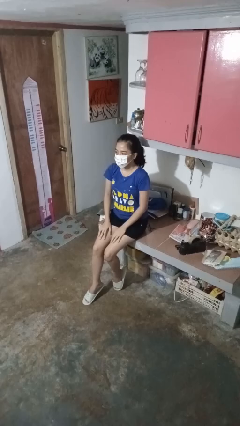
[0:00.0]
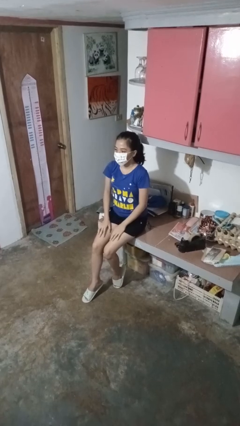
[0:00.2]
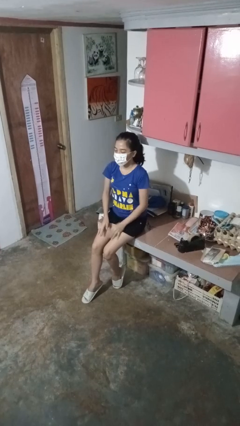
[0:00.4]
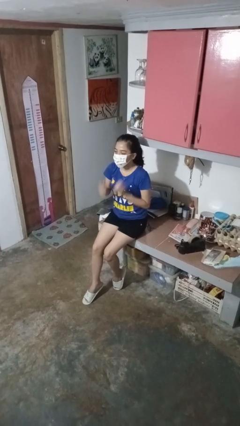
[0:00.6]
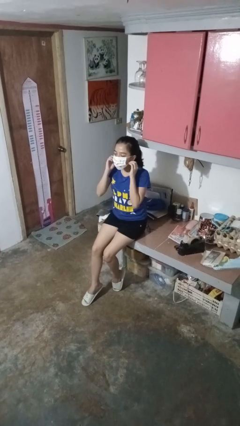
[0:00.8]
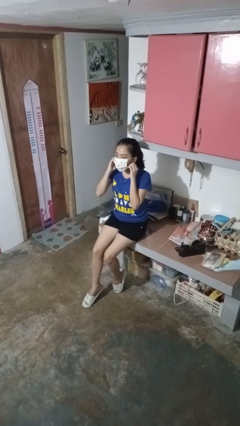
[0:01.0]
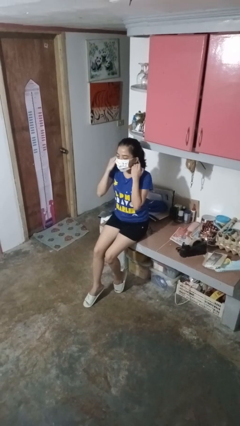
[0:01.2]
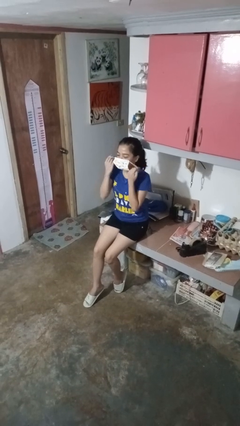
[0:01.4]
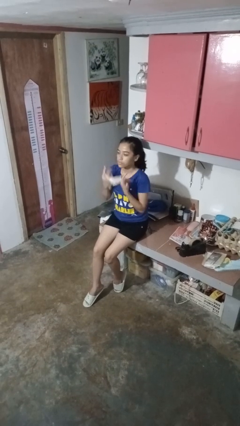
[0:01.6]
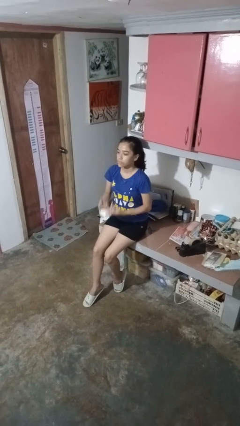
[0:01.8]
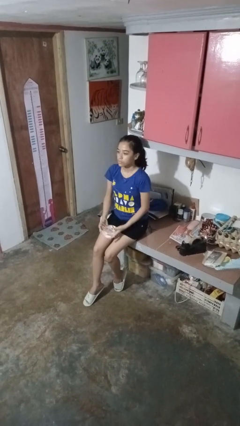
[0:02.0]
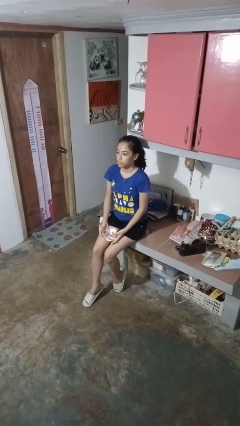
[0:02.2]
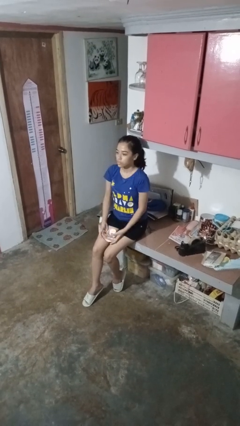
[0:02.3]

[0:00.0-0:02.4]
person takes off facemask

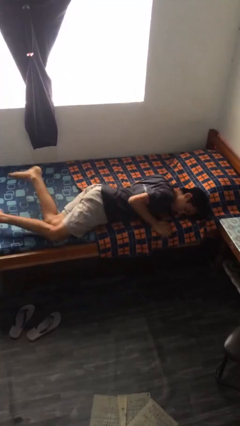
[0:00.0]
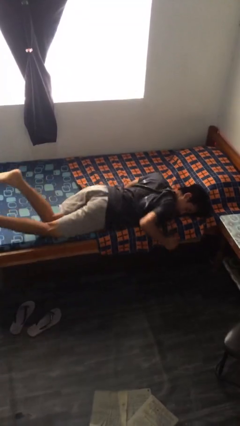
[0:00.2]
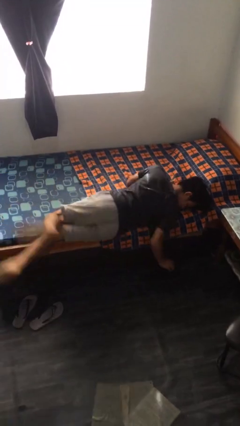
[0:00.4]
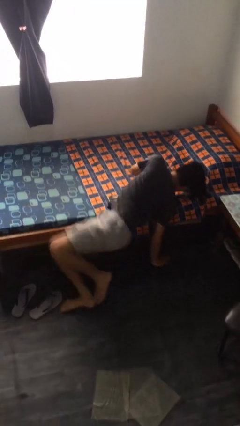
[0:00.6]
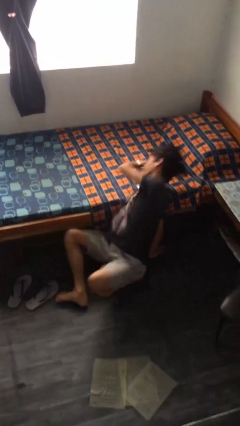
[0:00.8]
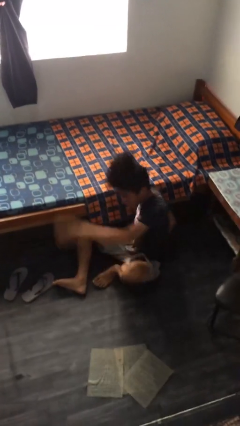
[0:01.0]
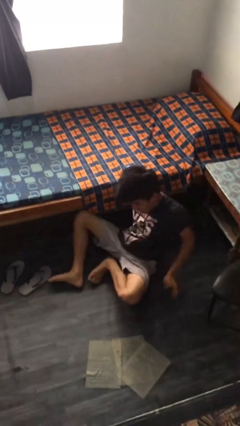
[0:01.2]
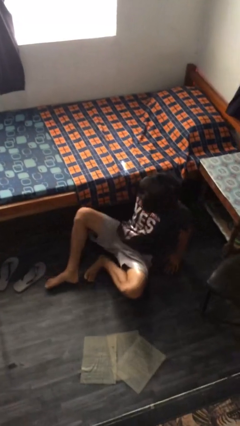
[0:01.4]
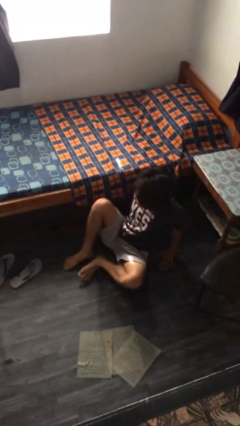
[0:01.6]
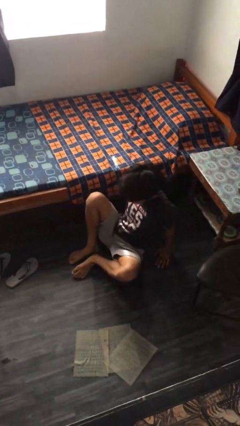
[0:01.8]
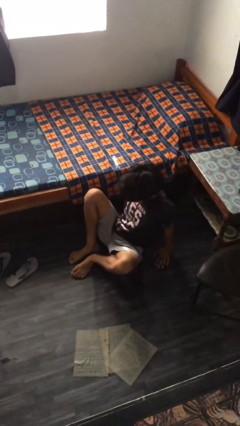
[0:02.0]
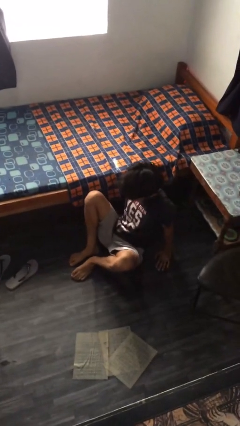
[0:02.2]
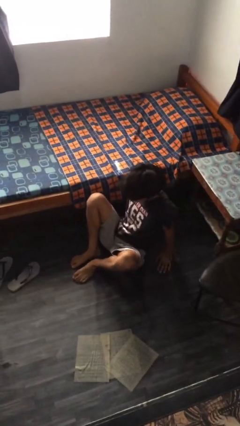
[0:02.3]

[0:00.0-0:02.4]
person falls from bed

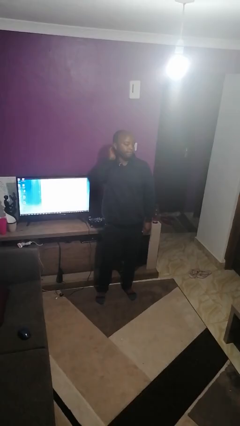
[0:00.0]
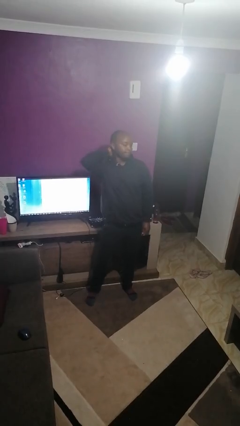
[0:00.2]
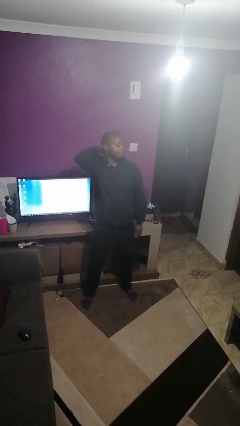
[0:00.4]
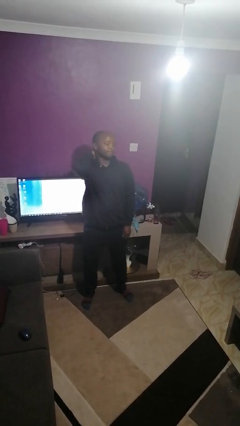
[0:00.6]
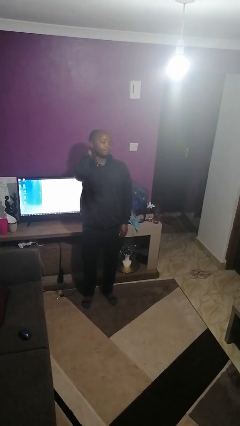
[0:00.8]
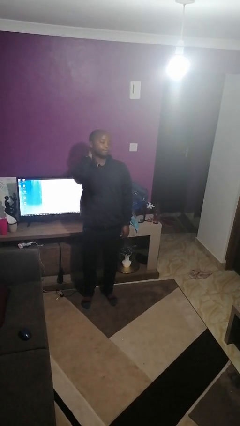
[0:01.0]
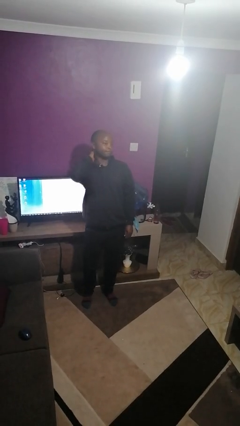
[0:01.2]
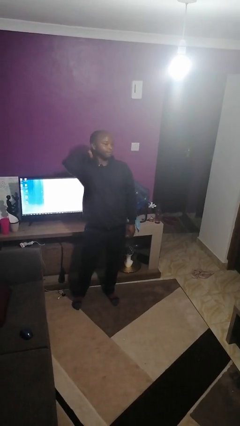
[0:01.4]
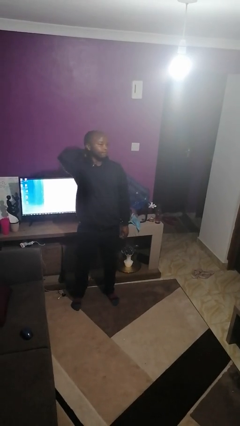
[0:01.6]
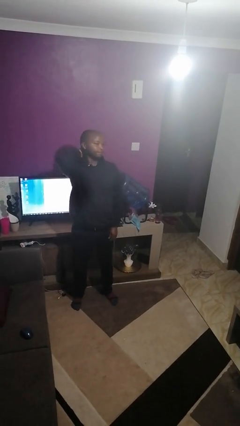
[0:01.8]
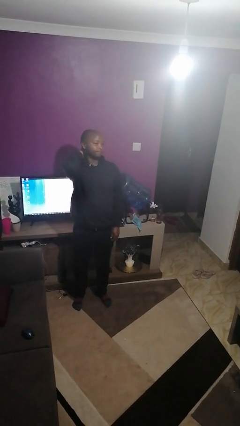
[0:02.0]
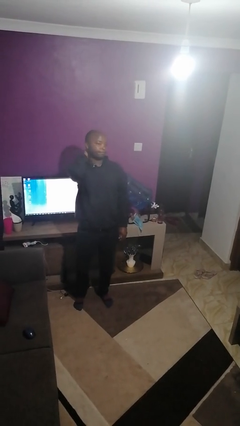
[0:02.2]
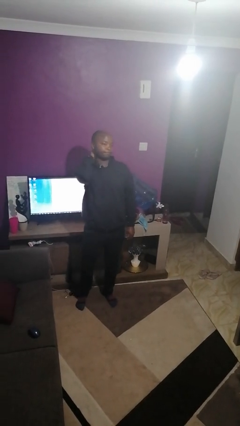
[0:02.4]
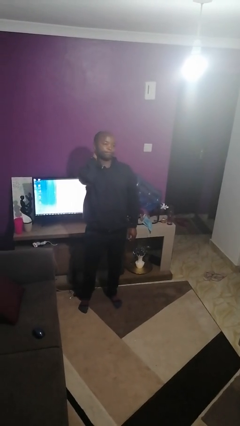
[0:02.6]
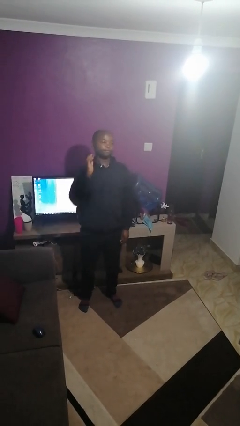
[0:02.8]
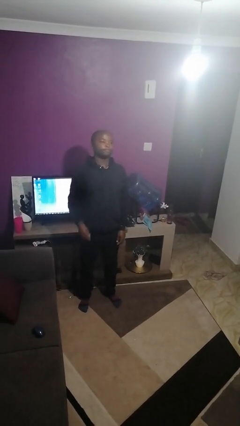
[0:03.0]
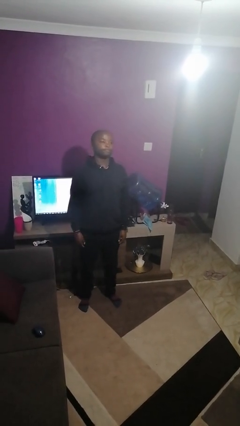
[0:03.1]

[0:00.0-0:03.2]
person rubs neck

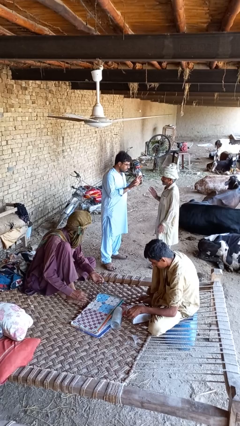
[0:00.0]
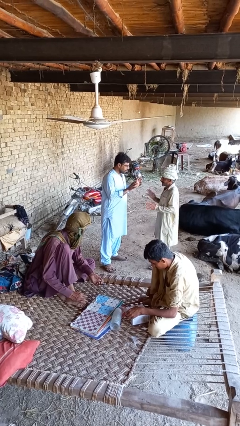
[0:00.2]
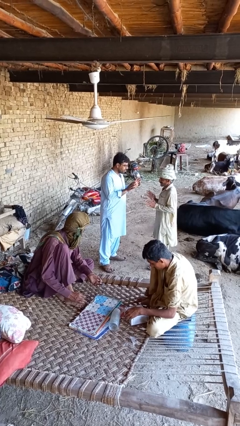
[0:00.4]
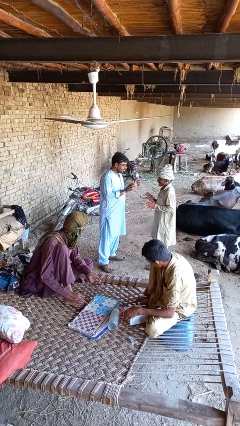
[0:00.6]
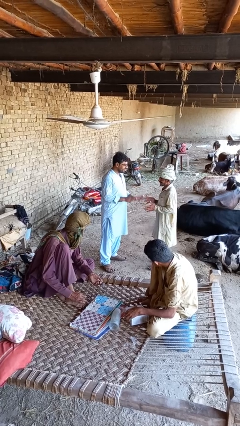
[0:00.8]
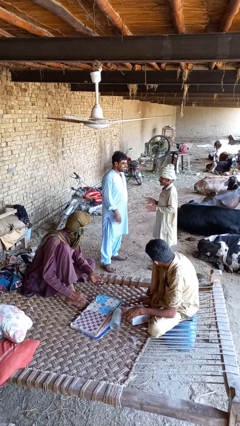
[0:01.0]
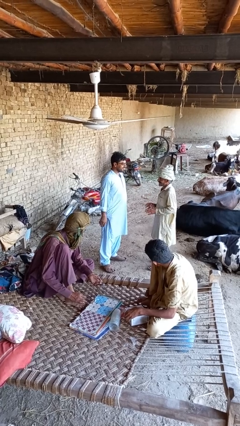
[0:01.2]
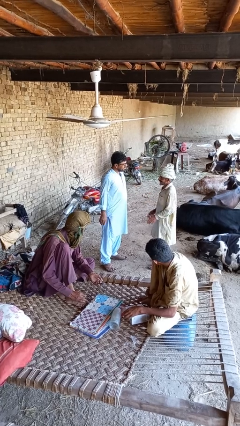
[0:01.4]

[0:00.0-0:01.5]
person talks to person

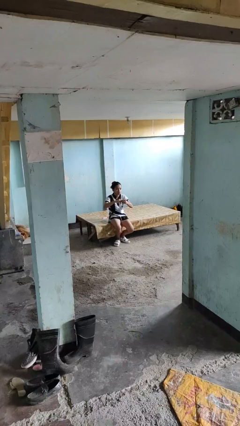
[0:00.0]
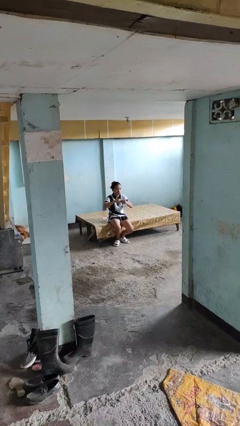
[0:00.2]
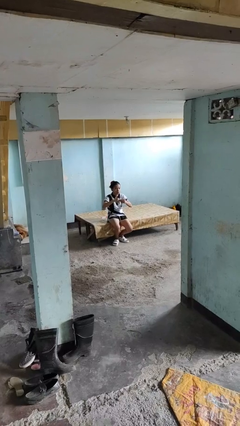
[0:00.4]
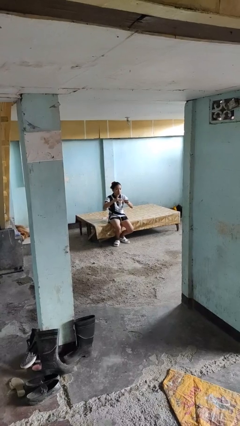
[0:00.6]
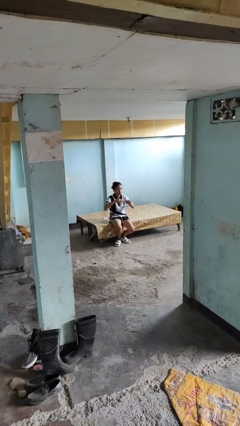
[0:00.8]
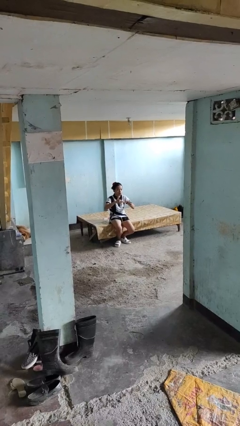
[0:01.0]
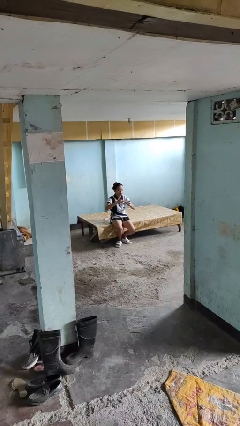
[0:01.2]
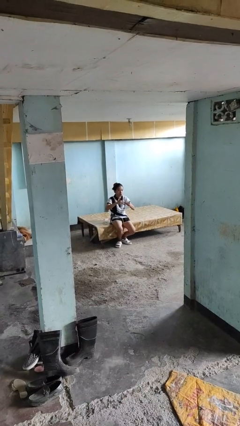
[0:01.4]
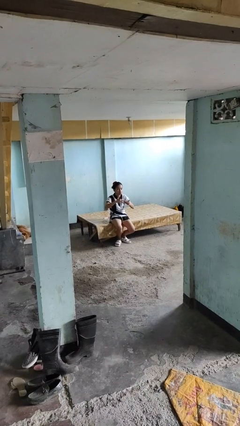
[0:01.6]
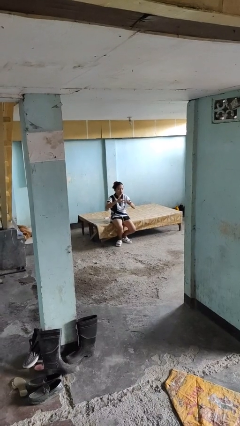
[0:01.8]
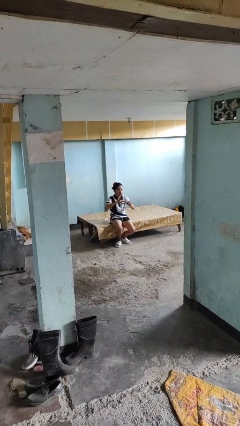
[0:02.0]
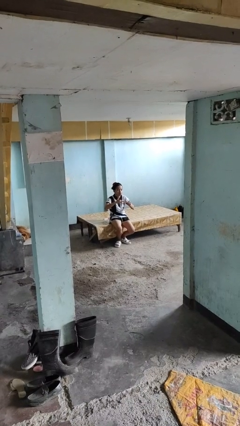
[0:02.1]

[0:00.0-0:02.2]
person takes off ring

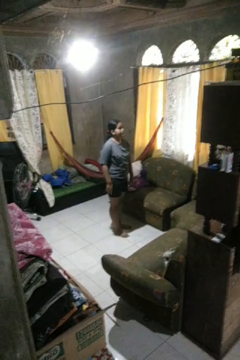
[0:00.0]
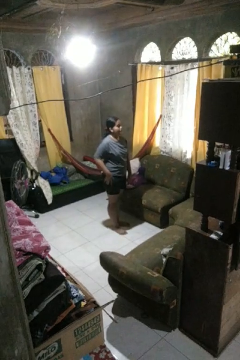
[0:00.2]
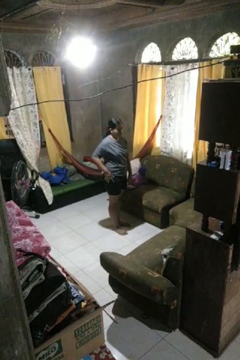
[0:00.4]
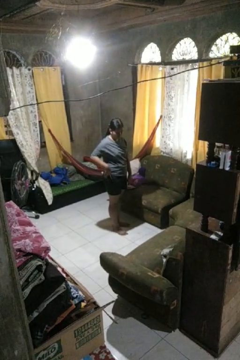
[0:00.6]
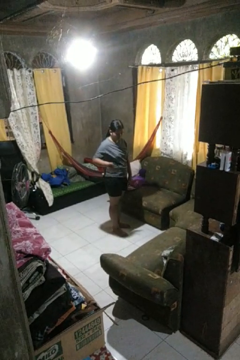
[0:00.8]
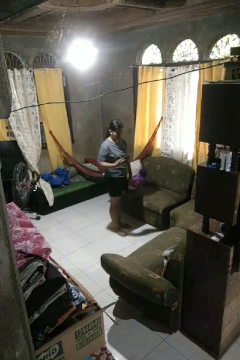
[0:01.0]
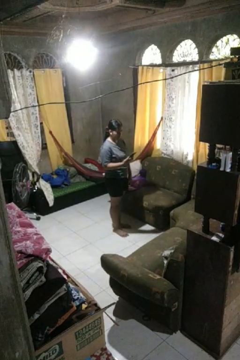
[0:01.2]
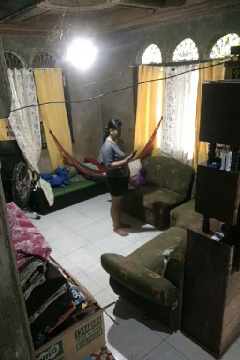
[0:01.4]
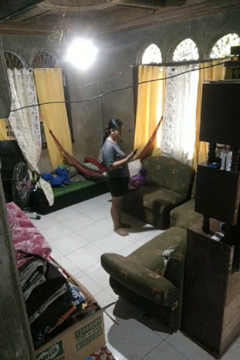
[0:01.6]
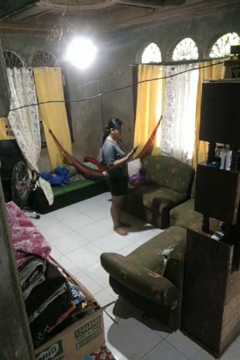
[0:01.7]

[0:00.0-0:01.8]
person takes phone from pocket

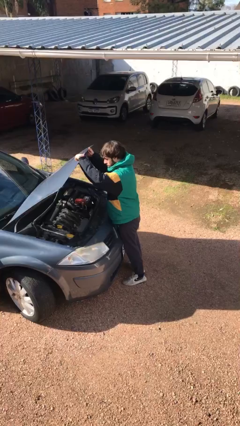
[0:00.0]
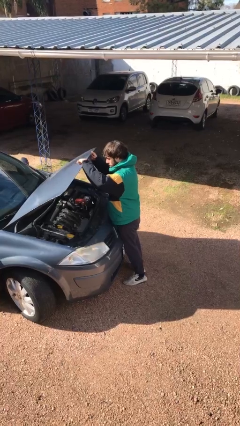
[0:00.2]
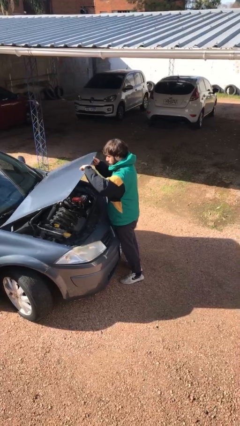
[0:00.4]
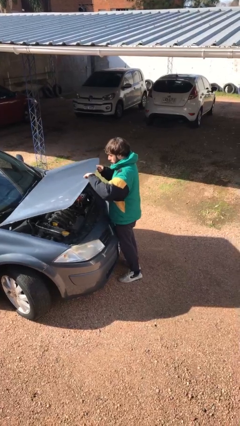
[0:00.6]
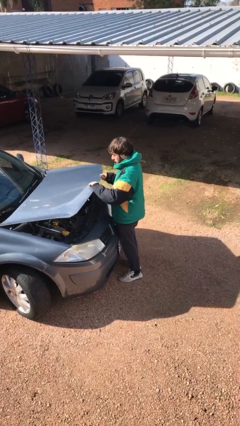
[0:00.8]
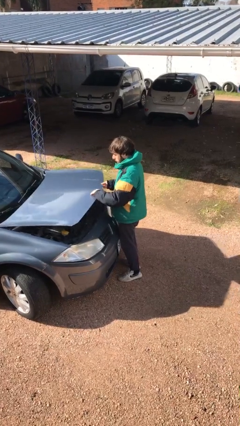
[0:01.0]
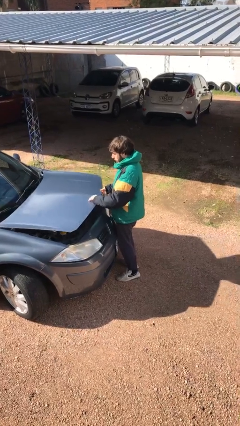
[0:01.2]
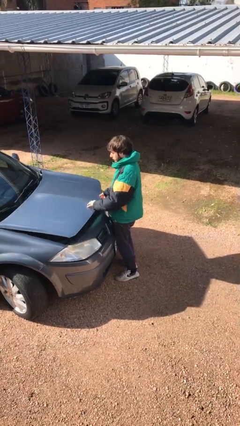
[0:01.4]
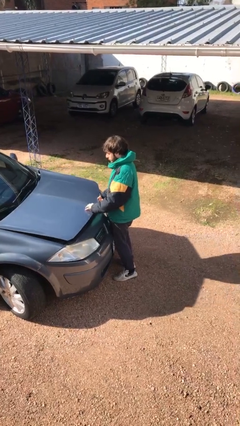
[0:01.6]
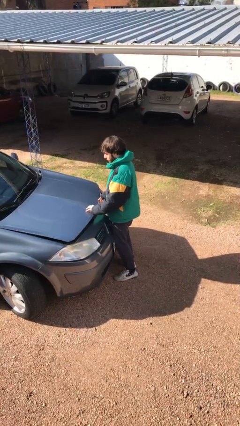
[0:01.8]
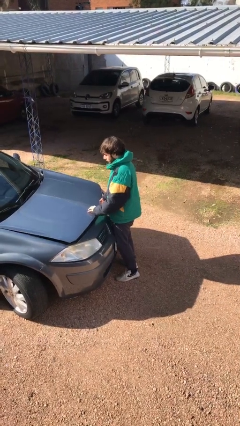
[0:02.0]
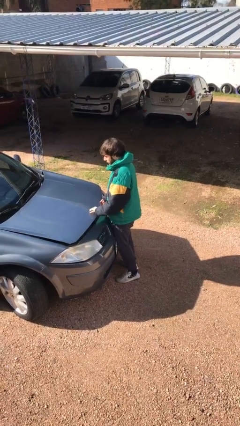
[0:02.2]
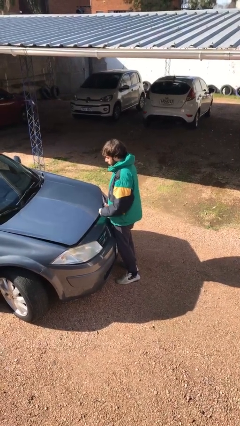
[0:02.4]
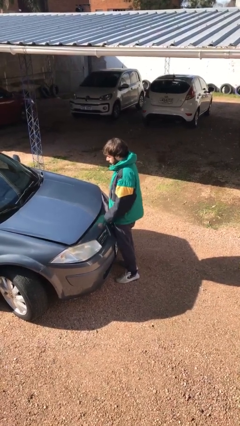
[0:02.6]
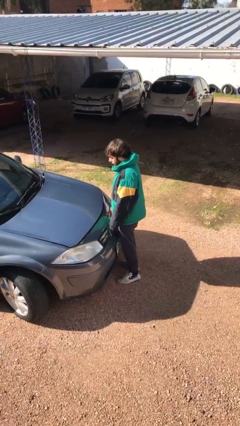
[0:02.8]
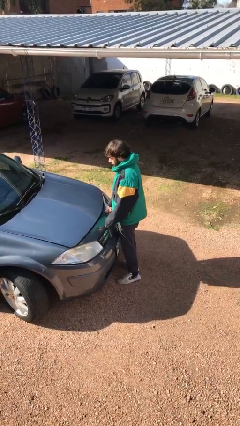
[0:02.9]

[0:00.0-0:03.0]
person closes car hood

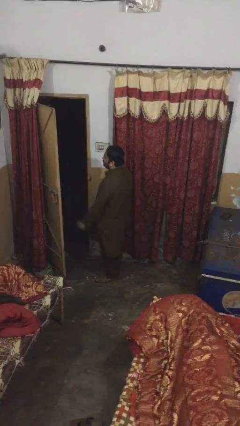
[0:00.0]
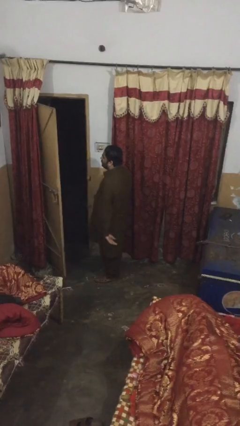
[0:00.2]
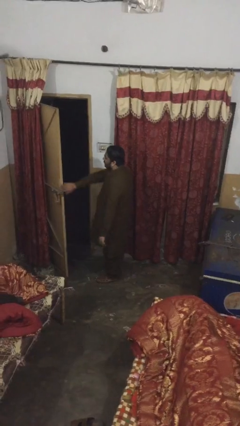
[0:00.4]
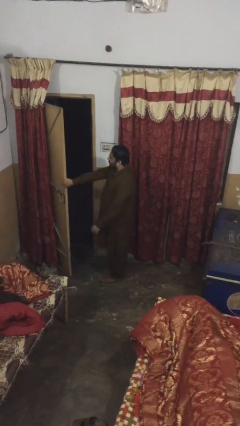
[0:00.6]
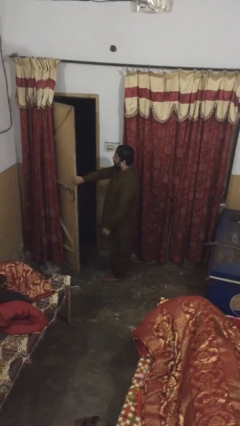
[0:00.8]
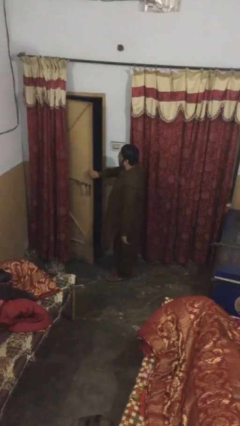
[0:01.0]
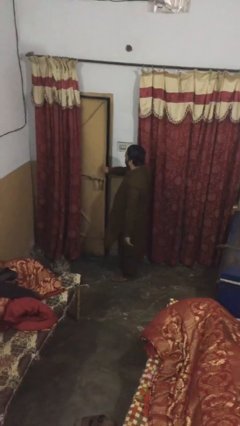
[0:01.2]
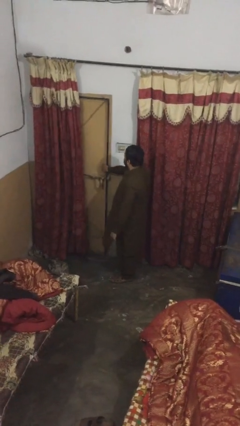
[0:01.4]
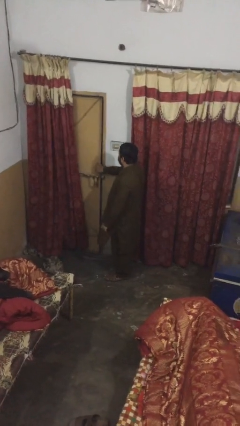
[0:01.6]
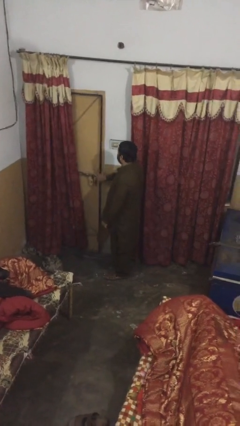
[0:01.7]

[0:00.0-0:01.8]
person closes facility door
